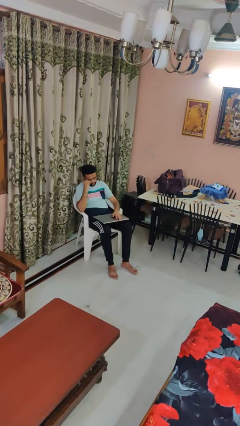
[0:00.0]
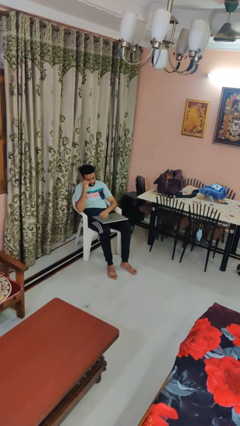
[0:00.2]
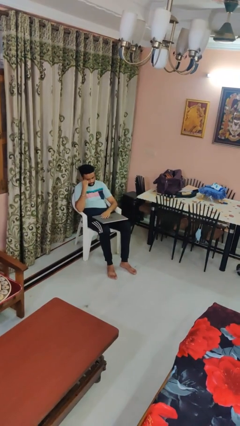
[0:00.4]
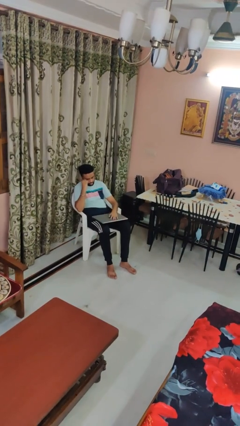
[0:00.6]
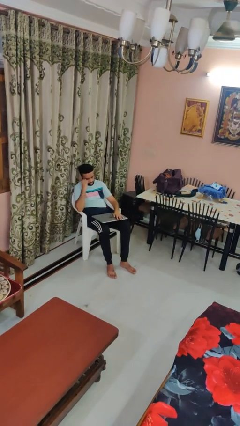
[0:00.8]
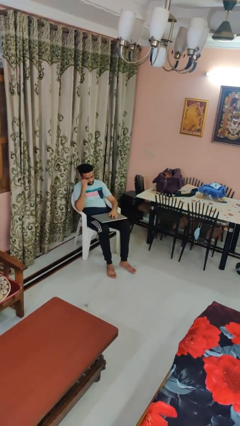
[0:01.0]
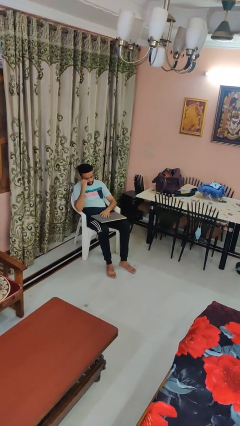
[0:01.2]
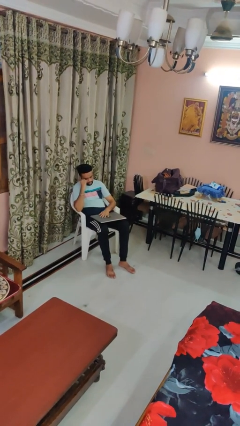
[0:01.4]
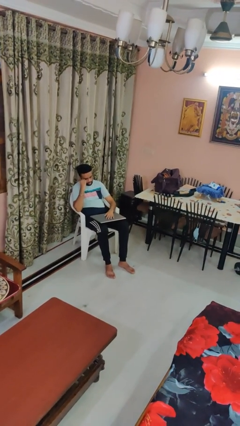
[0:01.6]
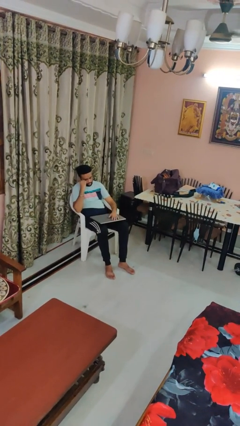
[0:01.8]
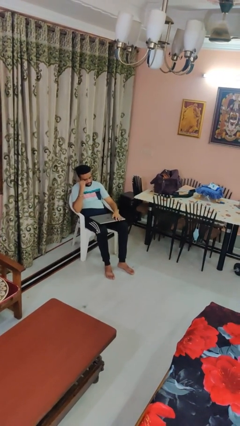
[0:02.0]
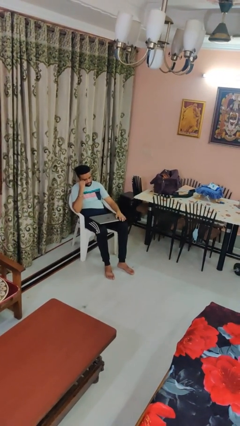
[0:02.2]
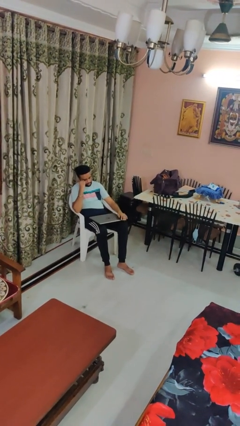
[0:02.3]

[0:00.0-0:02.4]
person waves hand over object

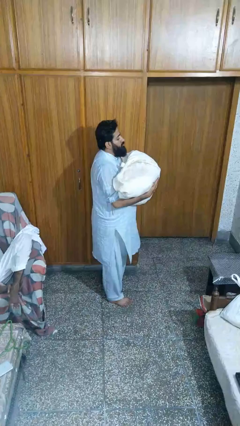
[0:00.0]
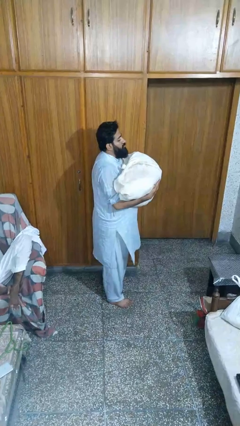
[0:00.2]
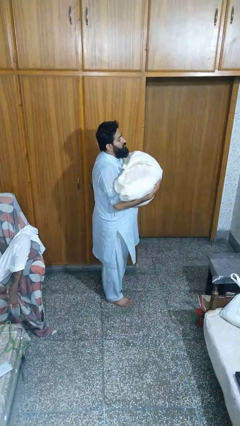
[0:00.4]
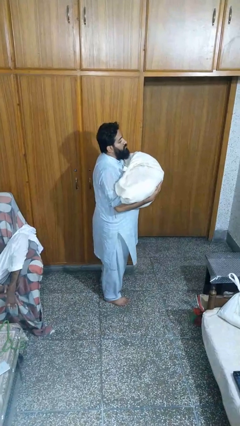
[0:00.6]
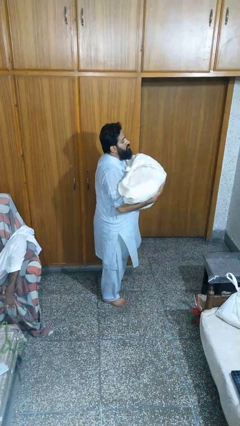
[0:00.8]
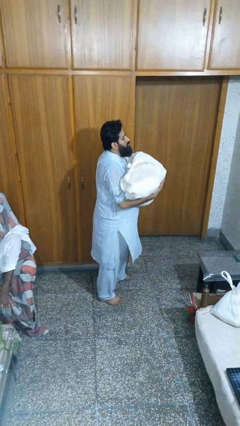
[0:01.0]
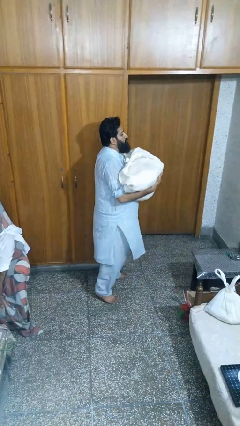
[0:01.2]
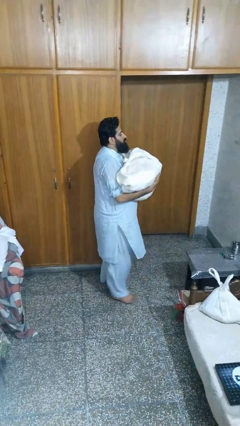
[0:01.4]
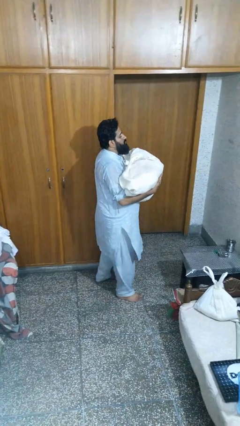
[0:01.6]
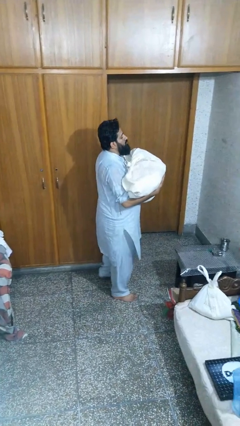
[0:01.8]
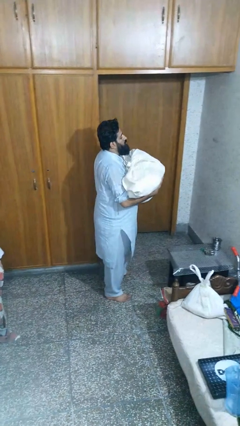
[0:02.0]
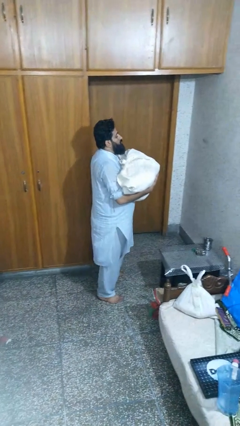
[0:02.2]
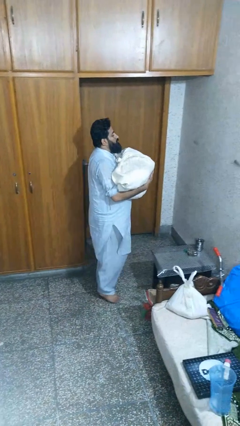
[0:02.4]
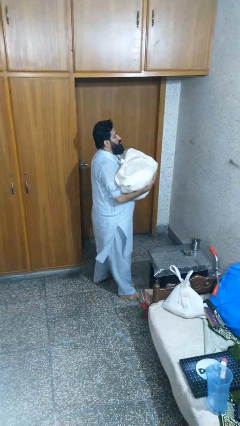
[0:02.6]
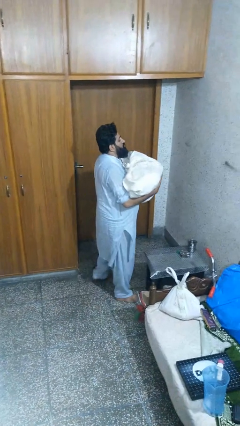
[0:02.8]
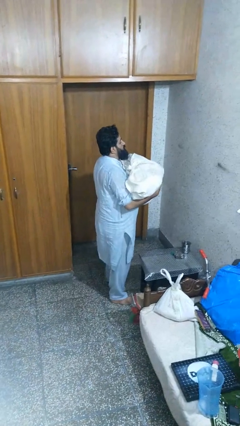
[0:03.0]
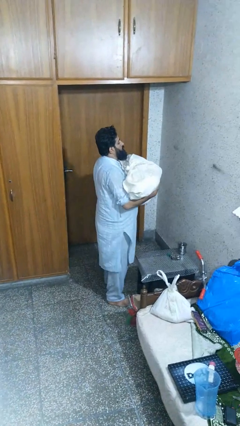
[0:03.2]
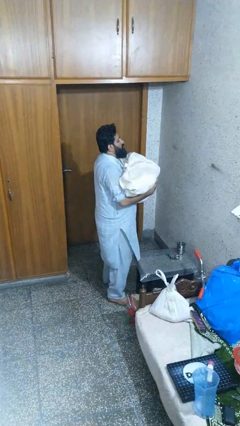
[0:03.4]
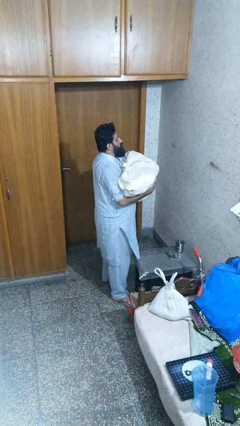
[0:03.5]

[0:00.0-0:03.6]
person carries laundry basket

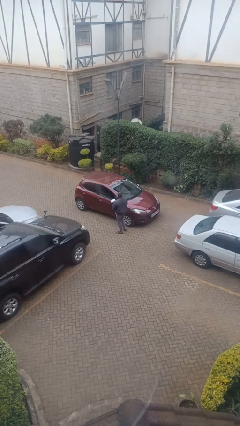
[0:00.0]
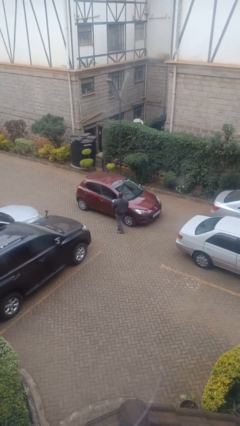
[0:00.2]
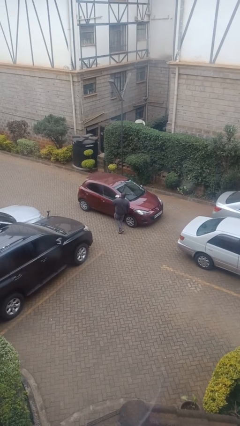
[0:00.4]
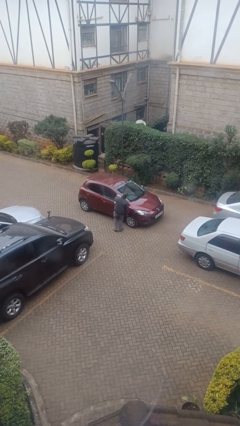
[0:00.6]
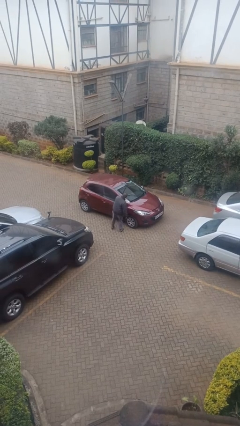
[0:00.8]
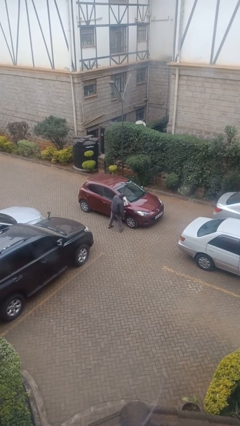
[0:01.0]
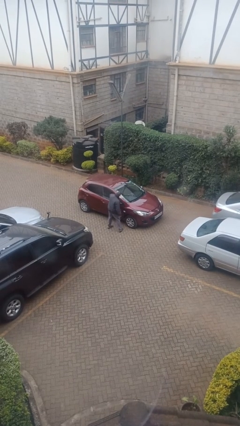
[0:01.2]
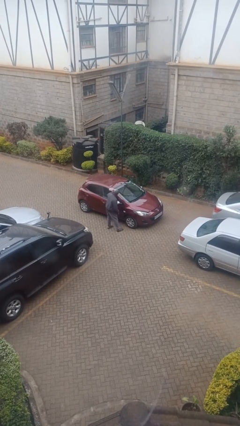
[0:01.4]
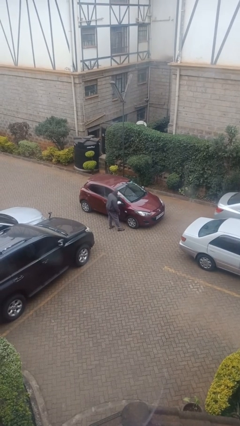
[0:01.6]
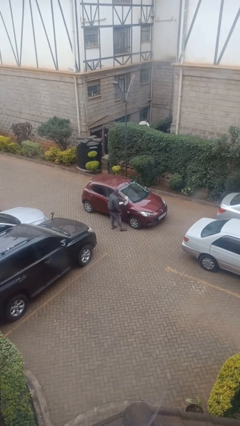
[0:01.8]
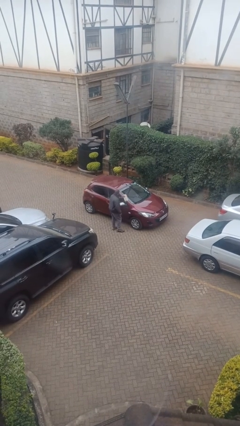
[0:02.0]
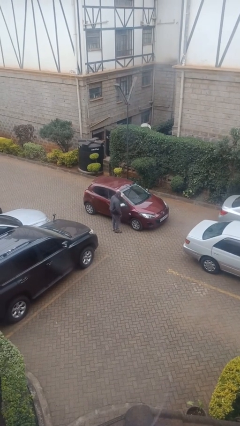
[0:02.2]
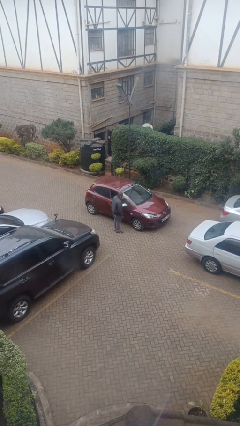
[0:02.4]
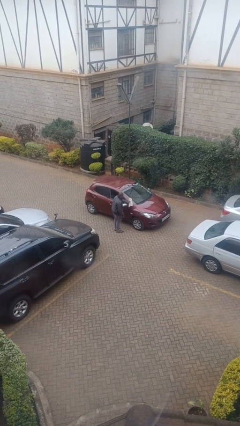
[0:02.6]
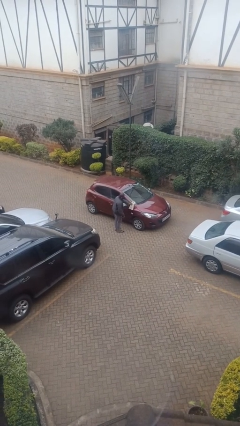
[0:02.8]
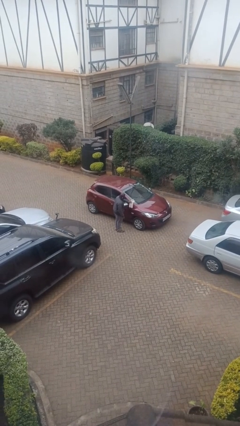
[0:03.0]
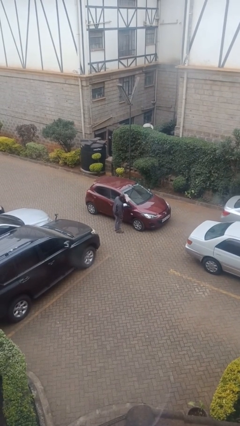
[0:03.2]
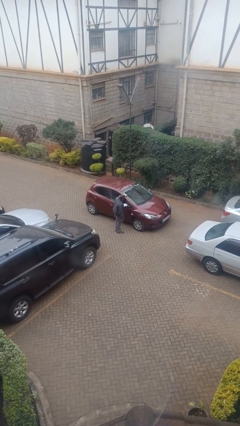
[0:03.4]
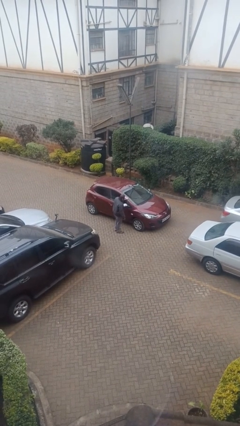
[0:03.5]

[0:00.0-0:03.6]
person polishes car with rag

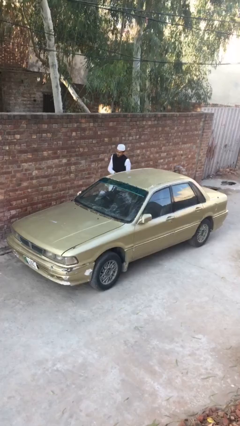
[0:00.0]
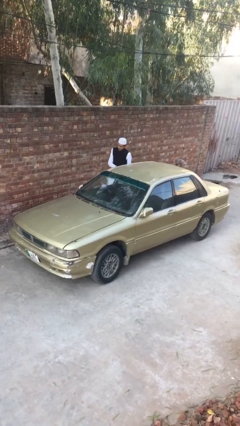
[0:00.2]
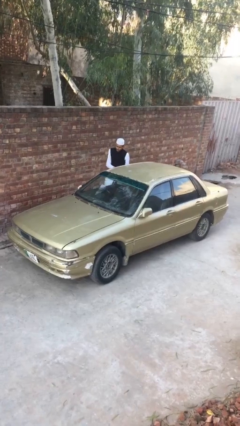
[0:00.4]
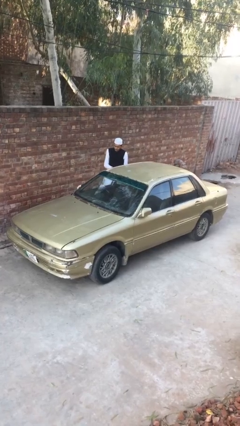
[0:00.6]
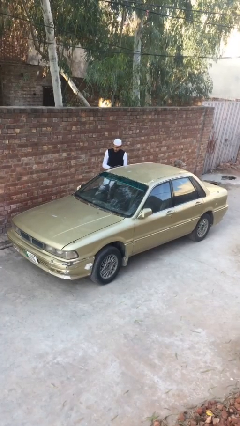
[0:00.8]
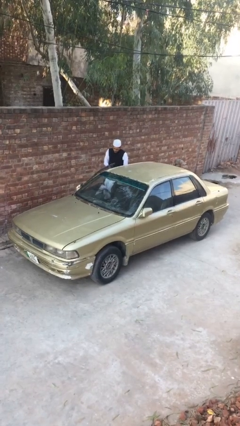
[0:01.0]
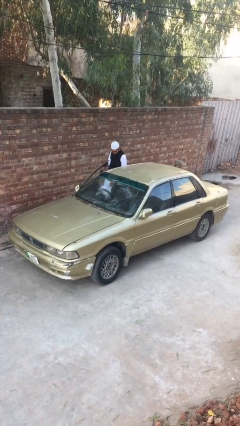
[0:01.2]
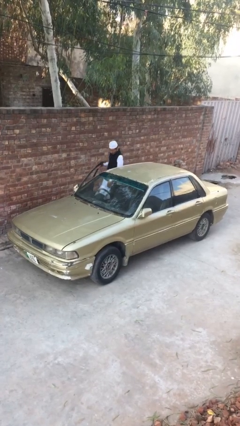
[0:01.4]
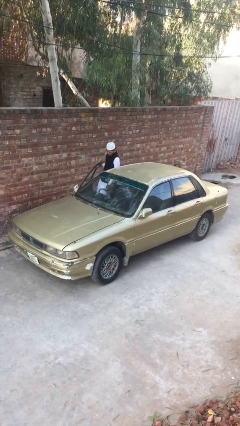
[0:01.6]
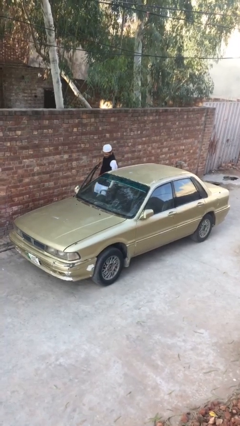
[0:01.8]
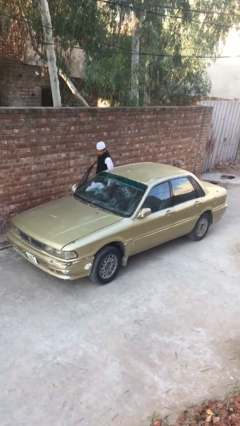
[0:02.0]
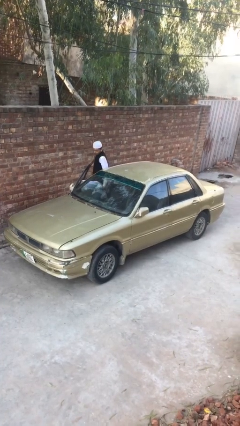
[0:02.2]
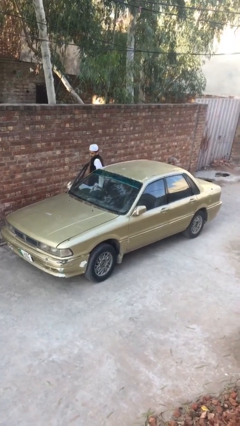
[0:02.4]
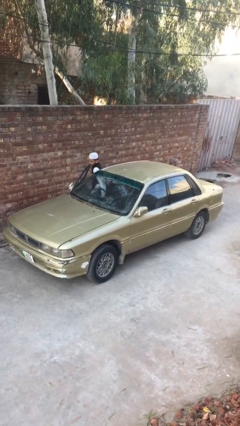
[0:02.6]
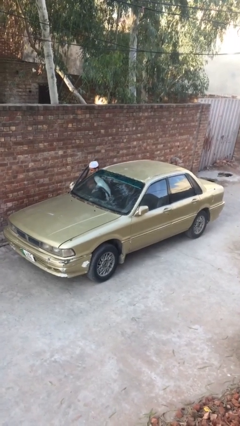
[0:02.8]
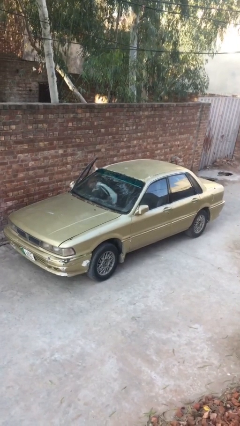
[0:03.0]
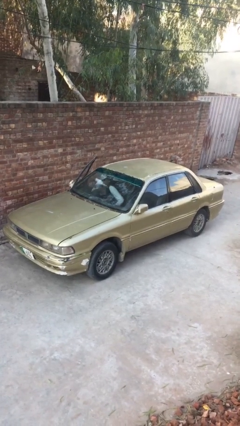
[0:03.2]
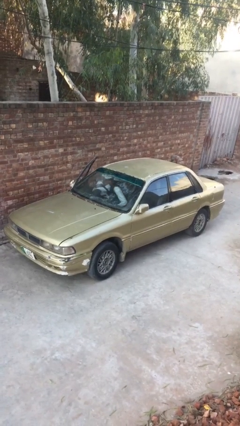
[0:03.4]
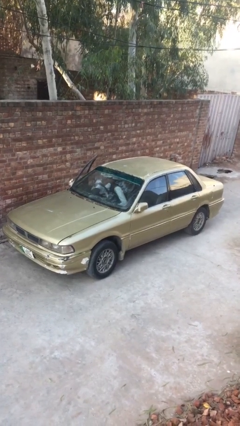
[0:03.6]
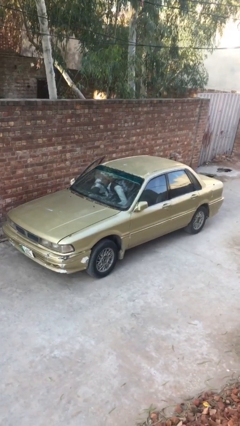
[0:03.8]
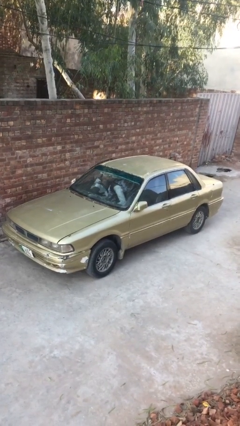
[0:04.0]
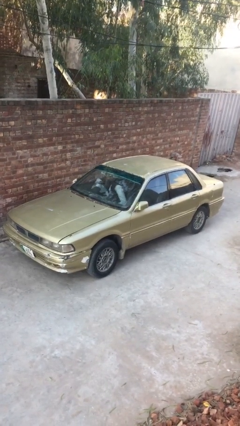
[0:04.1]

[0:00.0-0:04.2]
car picks up person

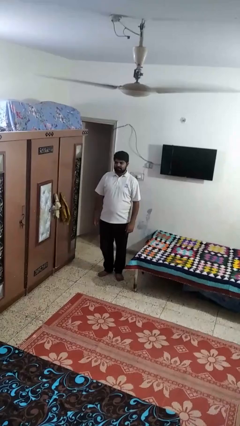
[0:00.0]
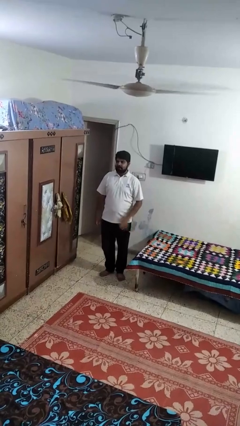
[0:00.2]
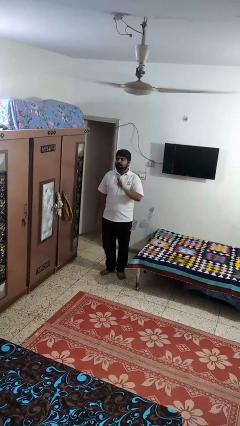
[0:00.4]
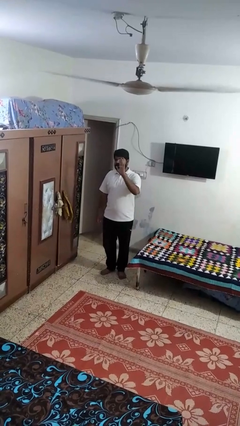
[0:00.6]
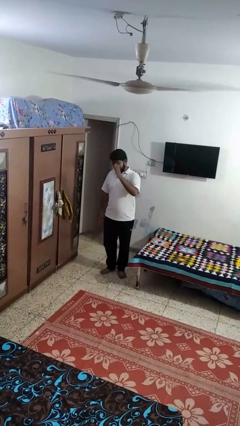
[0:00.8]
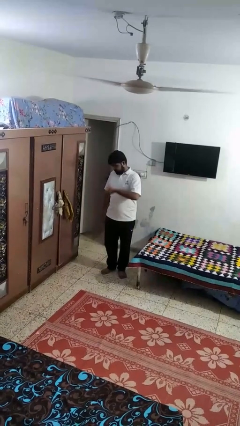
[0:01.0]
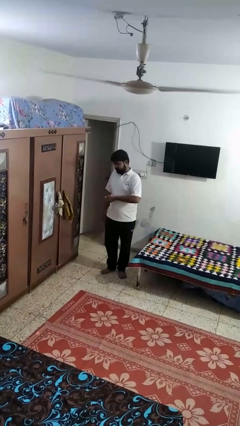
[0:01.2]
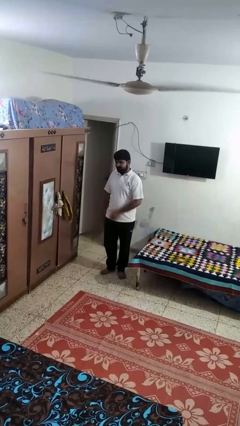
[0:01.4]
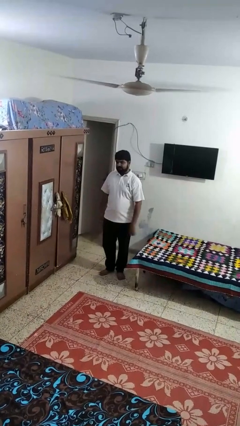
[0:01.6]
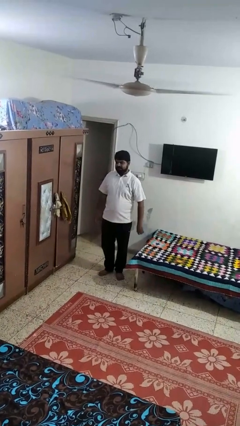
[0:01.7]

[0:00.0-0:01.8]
person gestures come here

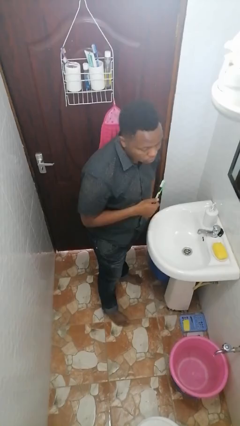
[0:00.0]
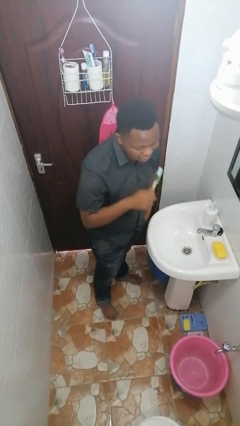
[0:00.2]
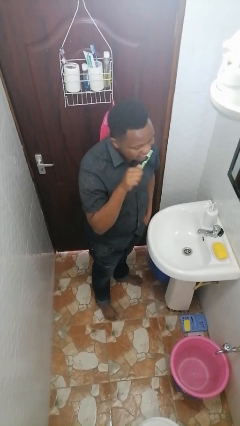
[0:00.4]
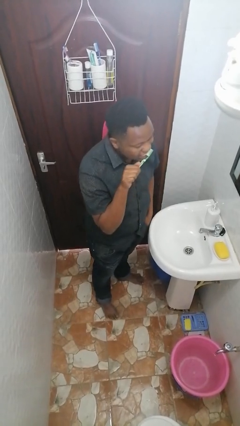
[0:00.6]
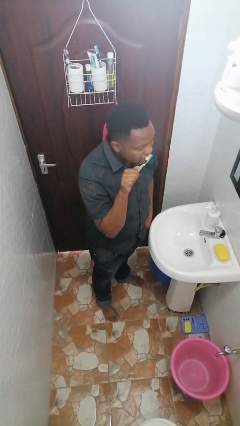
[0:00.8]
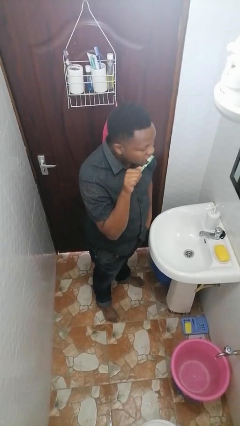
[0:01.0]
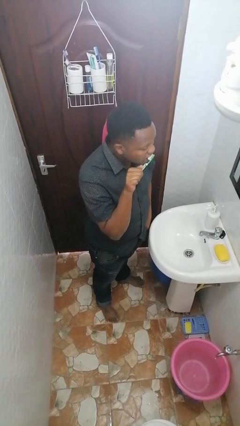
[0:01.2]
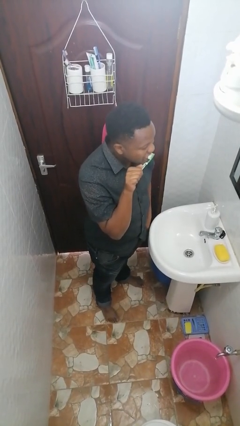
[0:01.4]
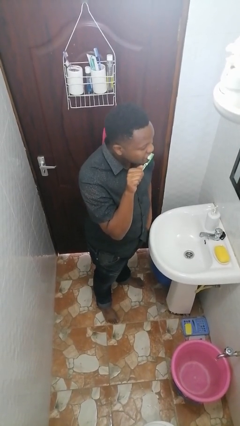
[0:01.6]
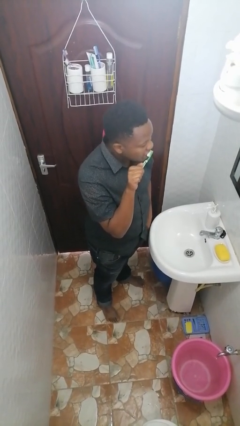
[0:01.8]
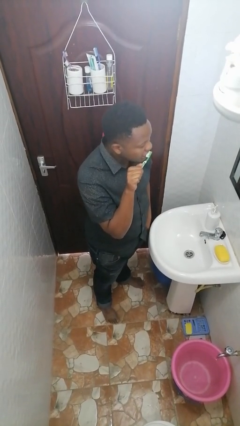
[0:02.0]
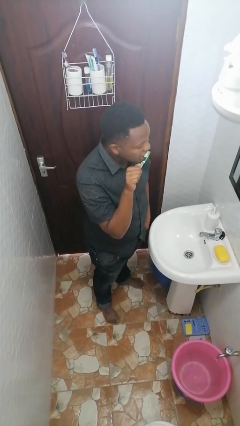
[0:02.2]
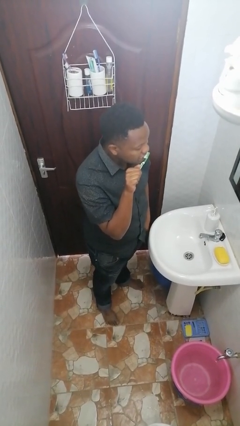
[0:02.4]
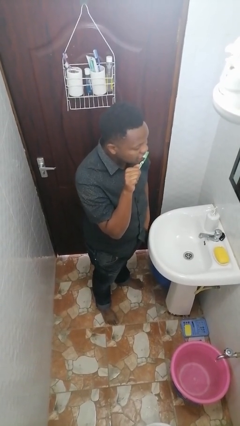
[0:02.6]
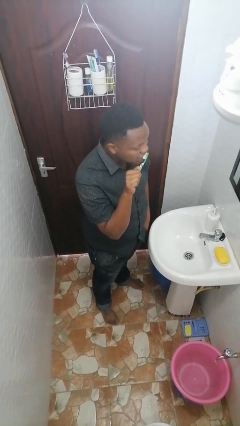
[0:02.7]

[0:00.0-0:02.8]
person brushes teeth
